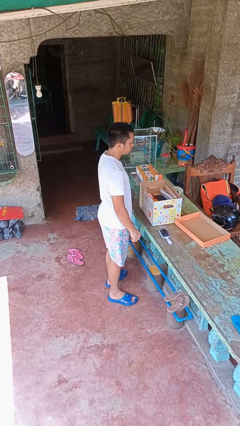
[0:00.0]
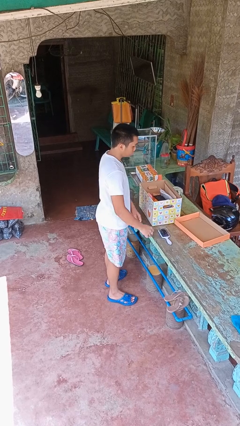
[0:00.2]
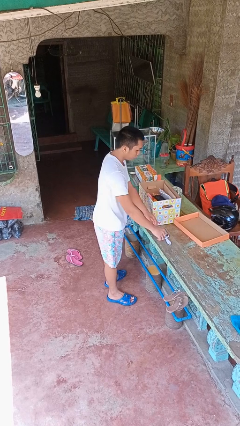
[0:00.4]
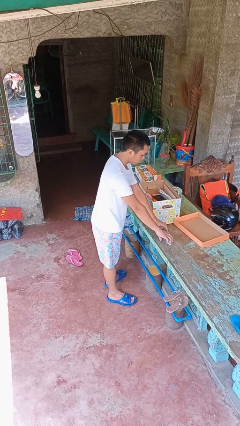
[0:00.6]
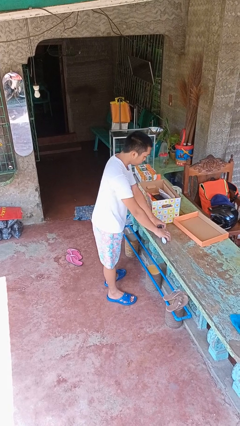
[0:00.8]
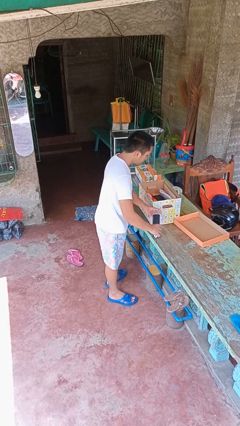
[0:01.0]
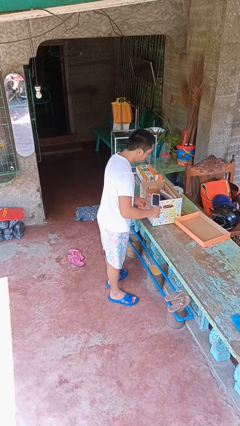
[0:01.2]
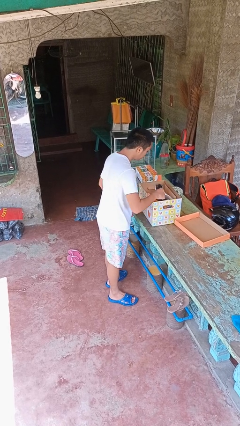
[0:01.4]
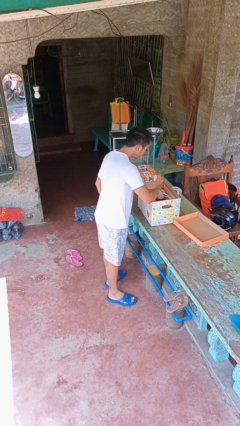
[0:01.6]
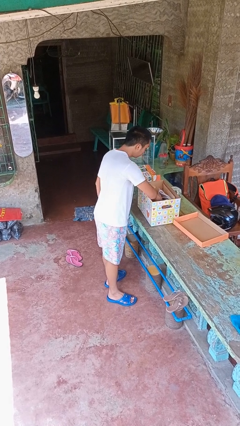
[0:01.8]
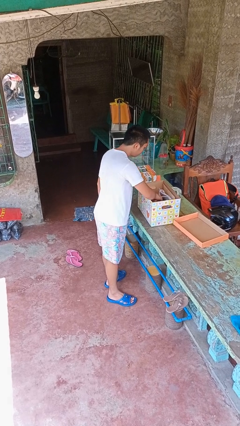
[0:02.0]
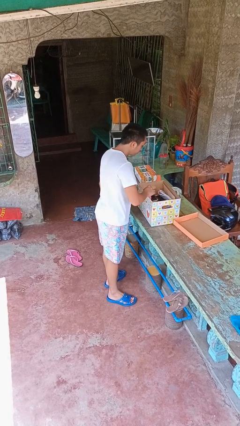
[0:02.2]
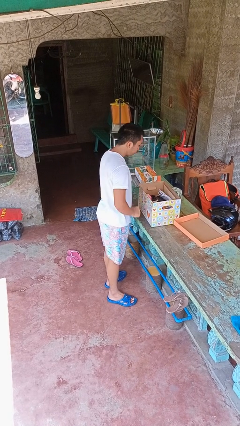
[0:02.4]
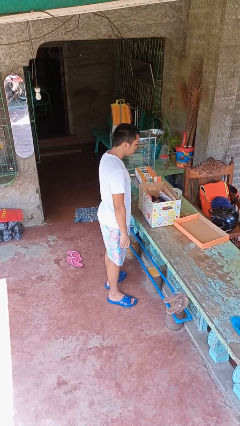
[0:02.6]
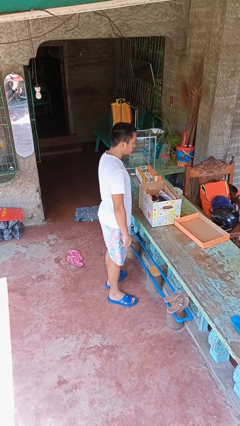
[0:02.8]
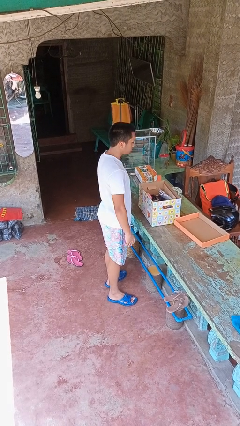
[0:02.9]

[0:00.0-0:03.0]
person puts object into box

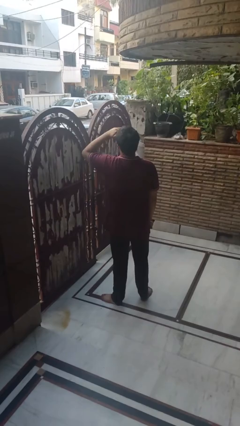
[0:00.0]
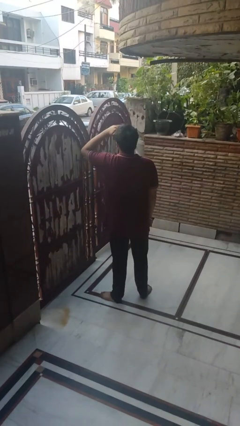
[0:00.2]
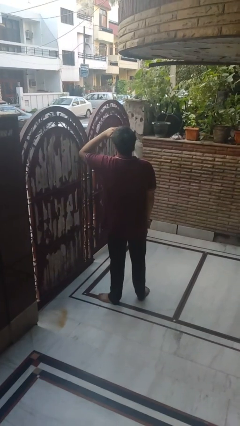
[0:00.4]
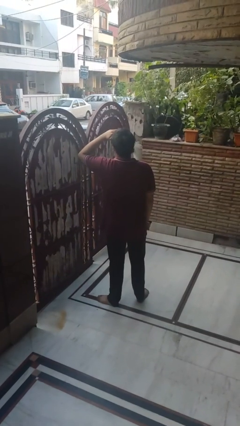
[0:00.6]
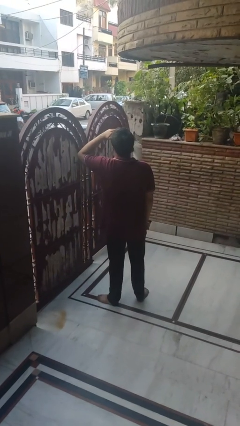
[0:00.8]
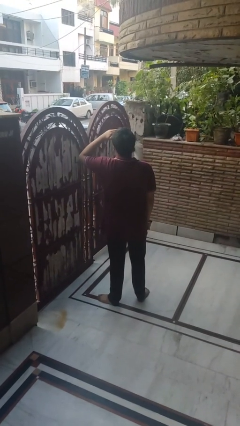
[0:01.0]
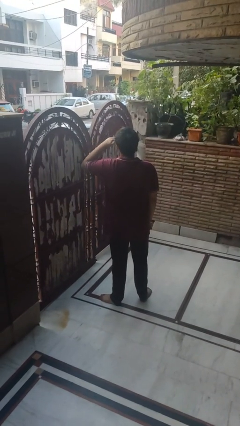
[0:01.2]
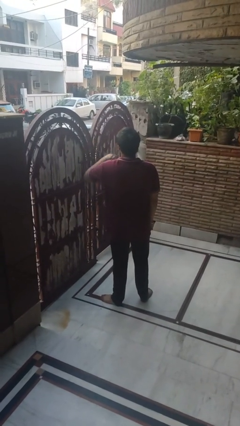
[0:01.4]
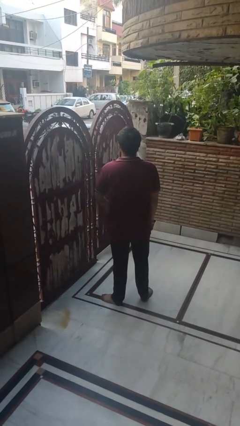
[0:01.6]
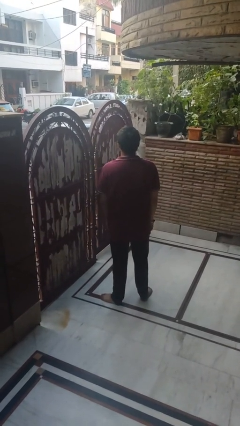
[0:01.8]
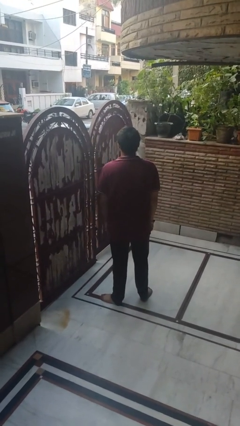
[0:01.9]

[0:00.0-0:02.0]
person shades eyes

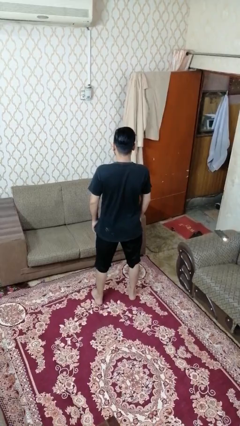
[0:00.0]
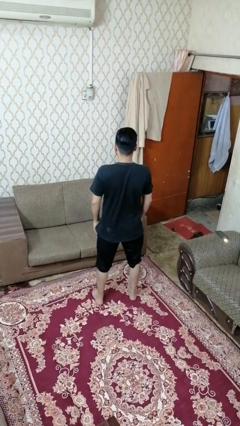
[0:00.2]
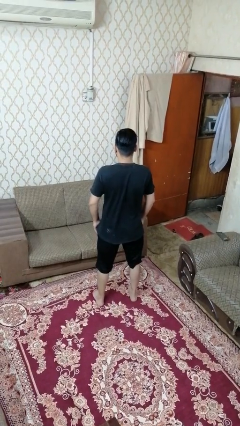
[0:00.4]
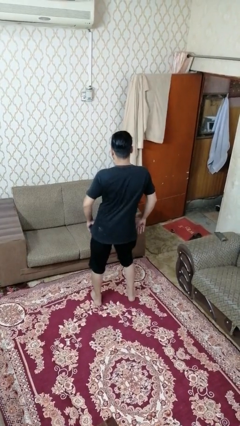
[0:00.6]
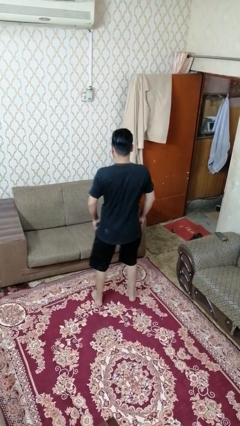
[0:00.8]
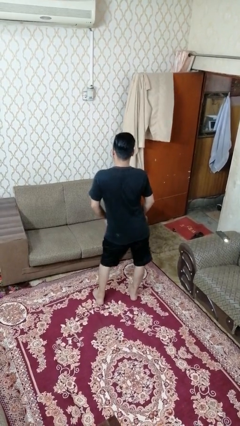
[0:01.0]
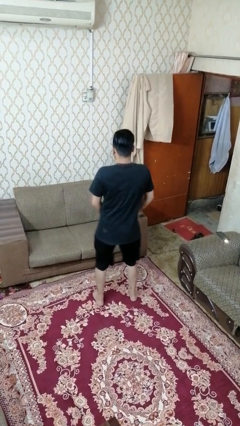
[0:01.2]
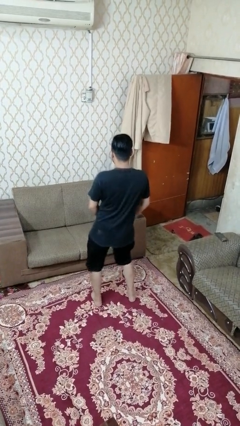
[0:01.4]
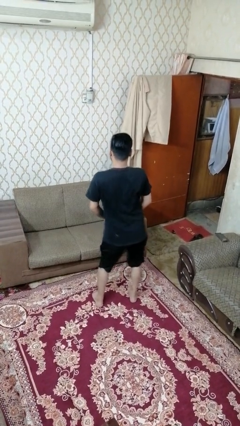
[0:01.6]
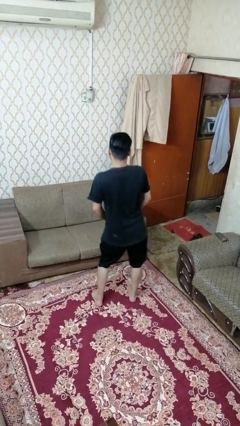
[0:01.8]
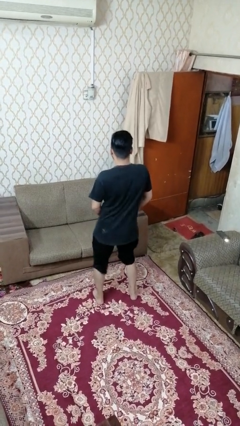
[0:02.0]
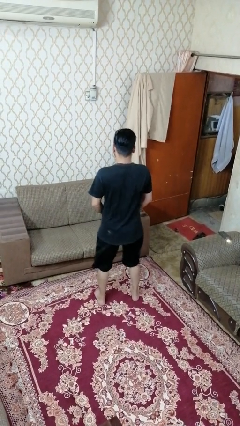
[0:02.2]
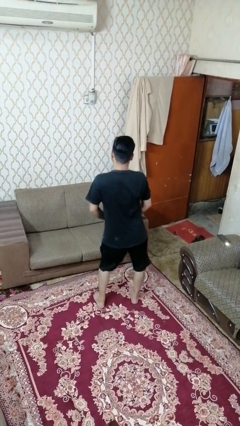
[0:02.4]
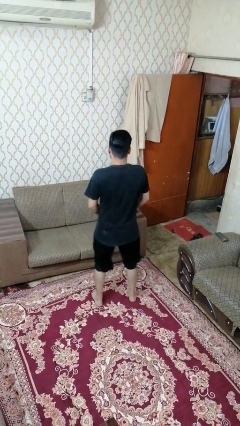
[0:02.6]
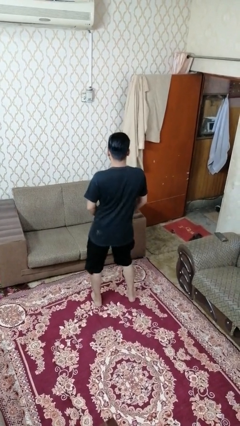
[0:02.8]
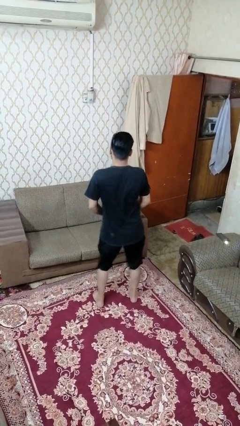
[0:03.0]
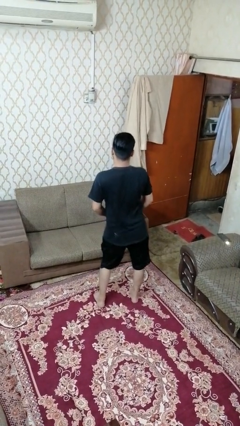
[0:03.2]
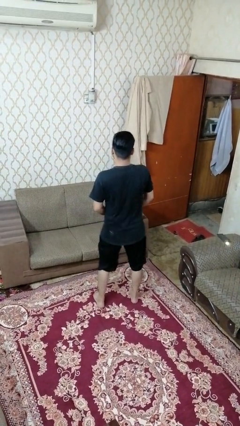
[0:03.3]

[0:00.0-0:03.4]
person wiggles hips

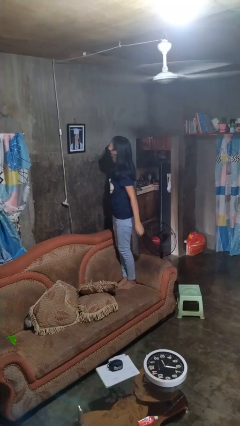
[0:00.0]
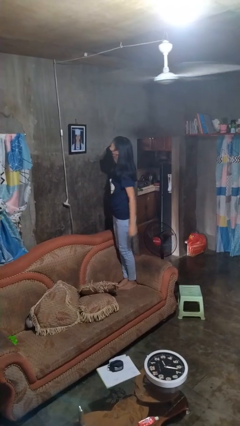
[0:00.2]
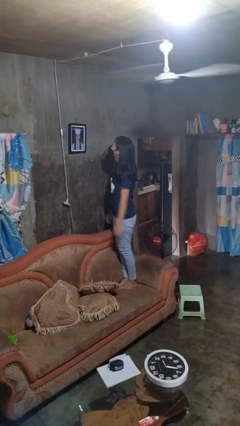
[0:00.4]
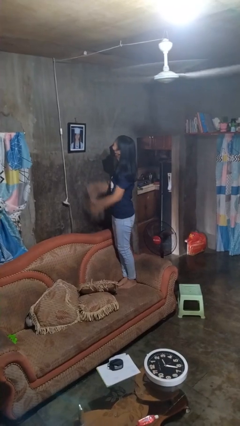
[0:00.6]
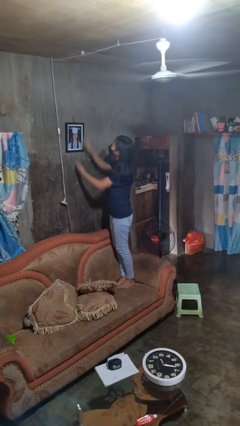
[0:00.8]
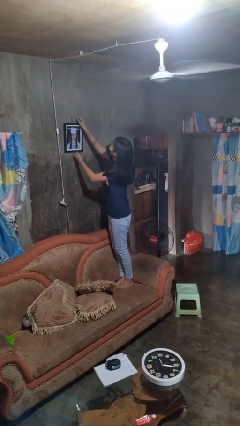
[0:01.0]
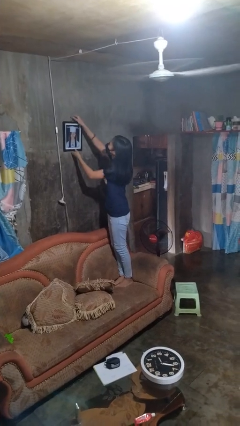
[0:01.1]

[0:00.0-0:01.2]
person takes down picture frame

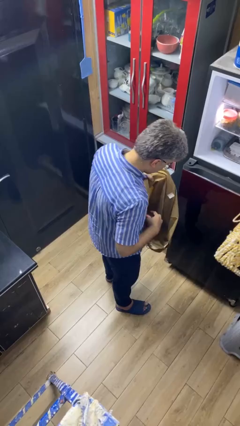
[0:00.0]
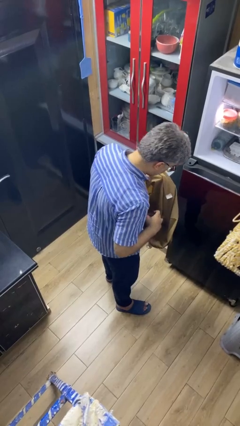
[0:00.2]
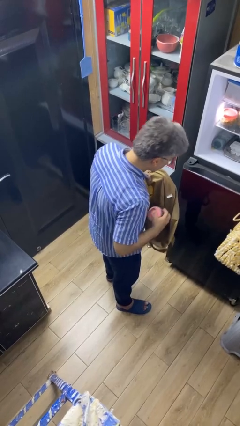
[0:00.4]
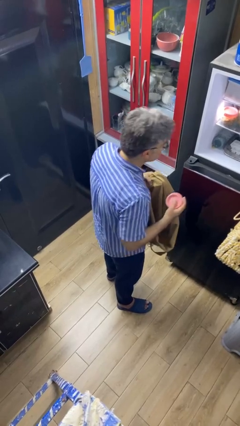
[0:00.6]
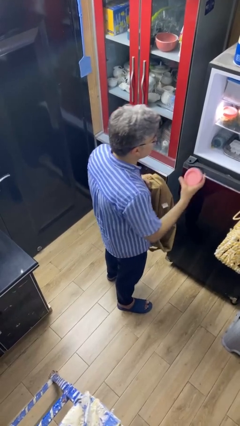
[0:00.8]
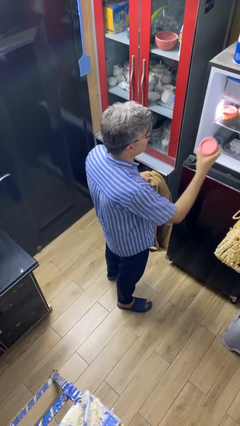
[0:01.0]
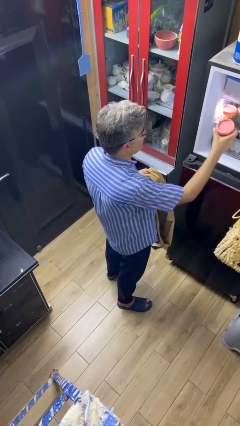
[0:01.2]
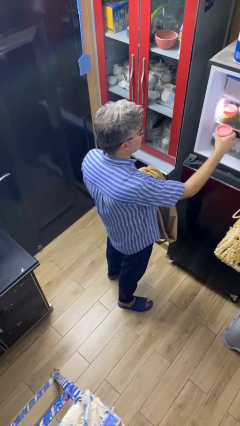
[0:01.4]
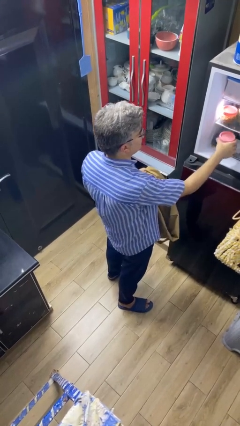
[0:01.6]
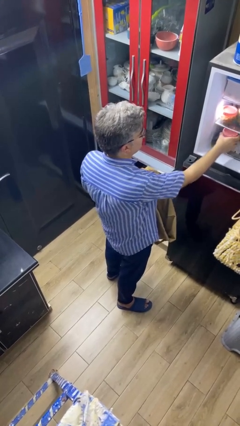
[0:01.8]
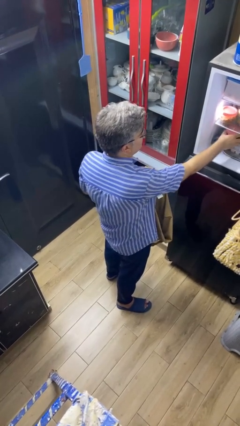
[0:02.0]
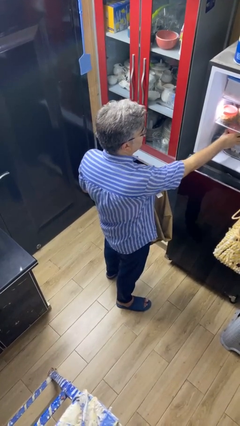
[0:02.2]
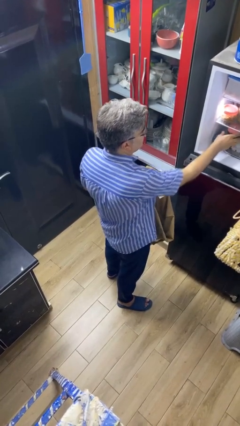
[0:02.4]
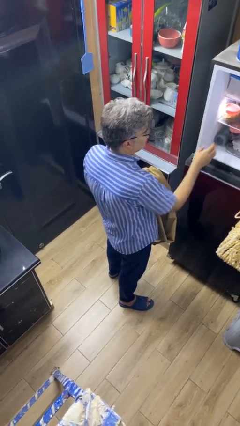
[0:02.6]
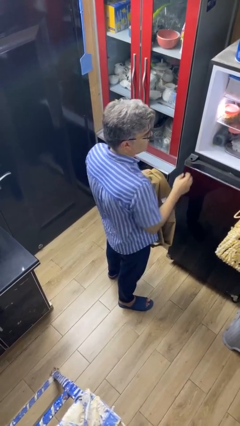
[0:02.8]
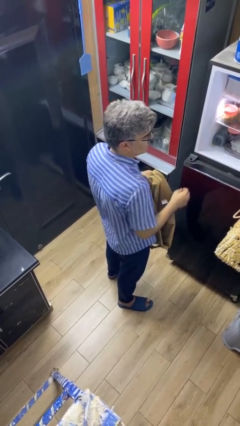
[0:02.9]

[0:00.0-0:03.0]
person loads groceries into refrigerator

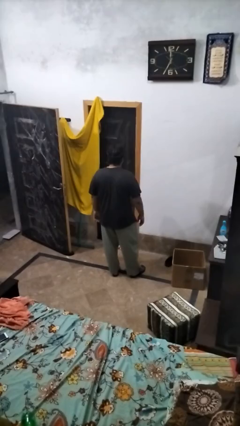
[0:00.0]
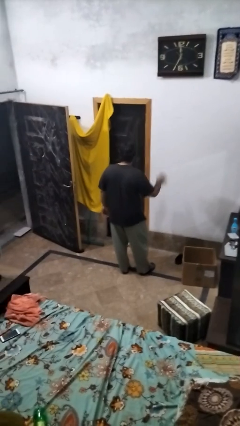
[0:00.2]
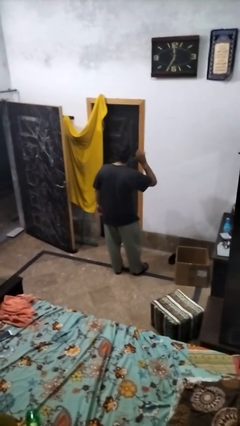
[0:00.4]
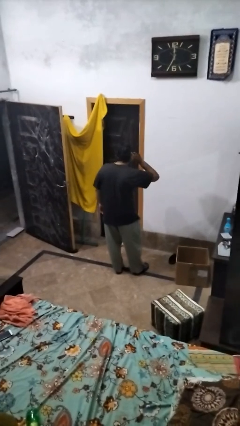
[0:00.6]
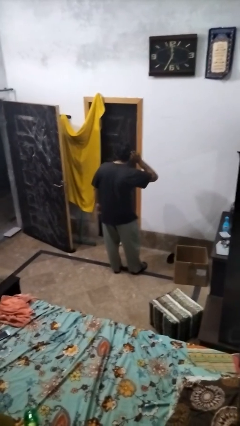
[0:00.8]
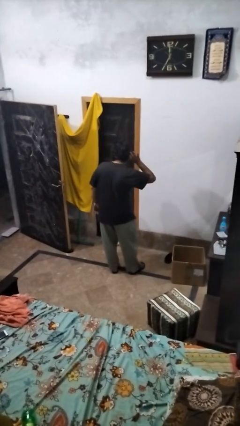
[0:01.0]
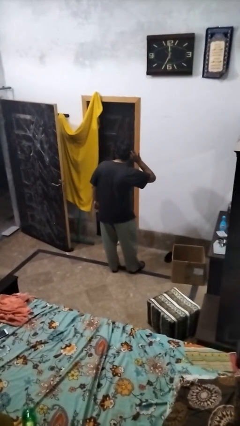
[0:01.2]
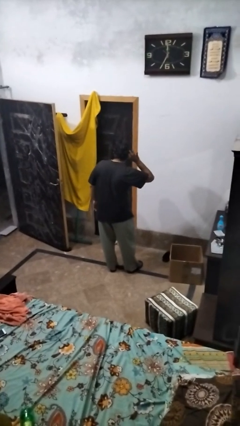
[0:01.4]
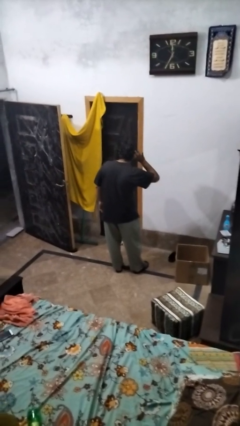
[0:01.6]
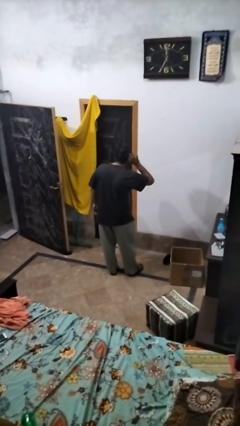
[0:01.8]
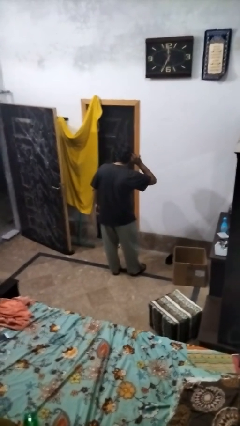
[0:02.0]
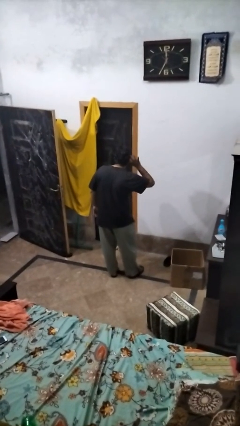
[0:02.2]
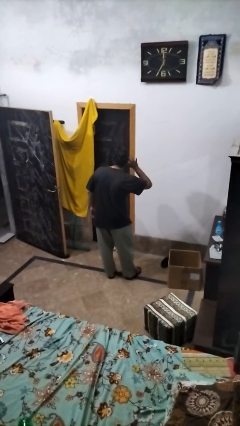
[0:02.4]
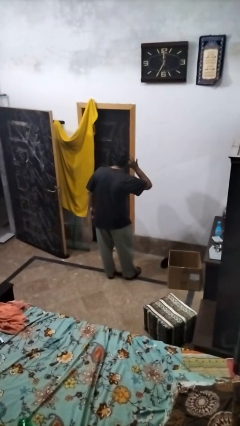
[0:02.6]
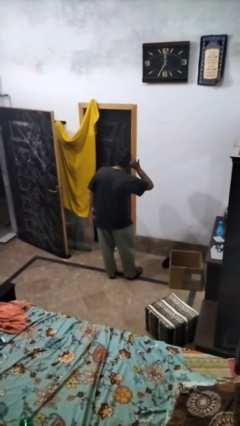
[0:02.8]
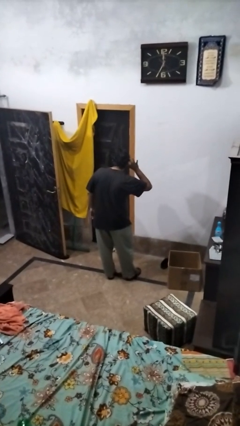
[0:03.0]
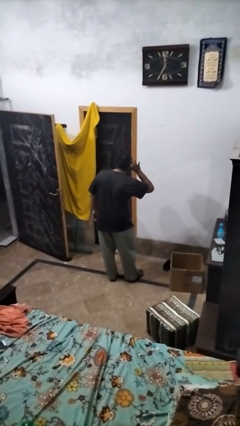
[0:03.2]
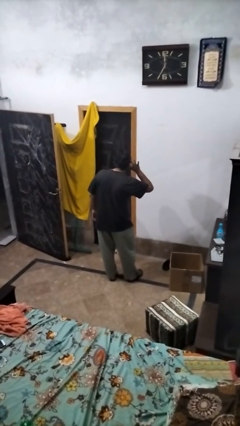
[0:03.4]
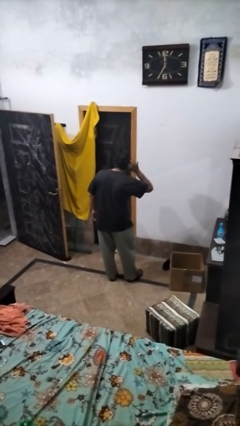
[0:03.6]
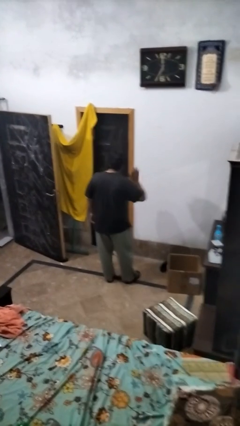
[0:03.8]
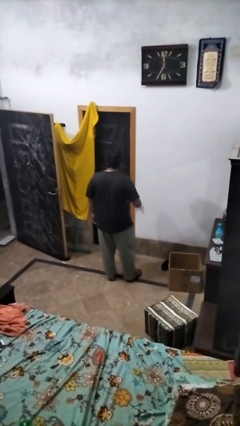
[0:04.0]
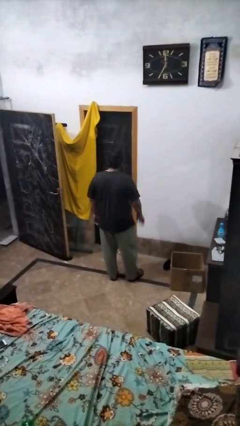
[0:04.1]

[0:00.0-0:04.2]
person gestures listen closely

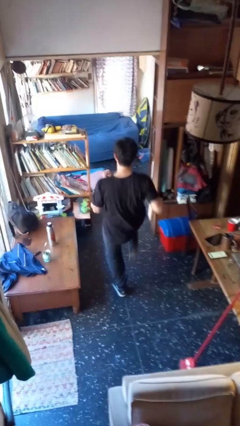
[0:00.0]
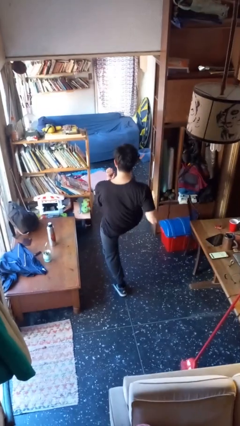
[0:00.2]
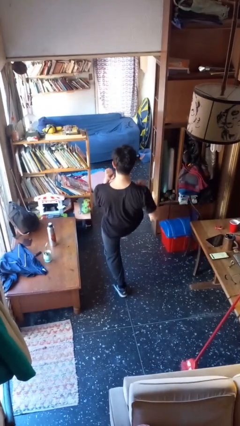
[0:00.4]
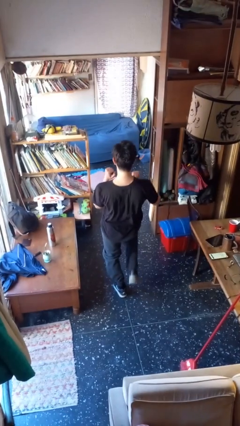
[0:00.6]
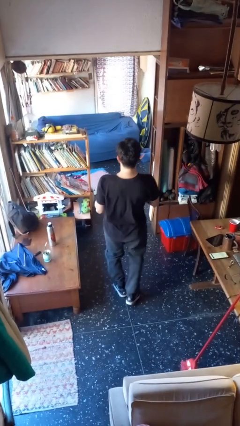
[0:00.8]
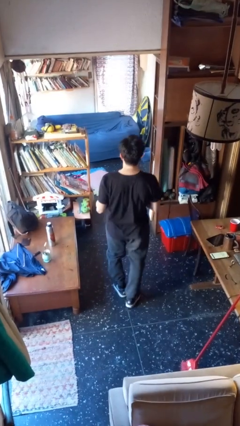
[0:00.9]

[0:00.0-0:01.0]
person karate kicks
